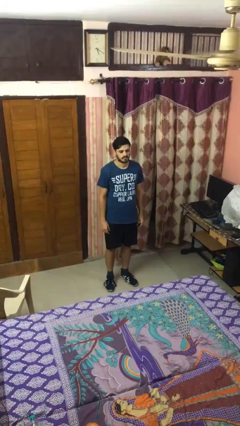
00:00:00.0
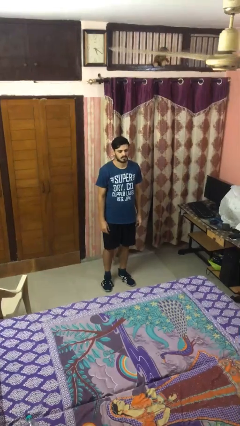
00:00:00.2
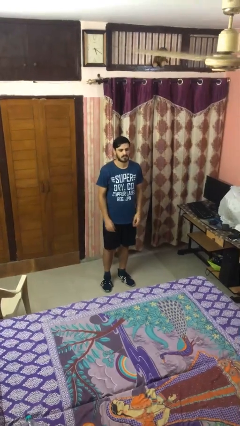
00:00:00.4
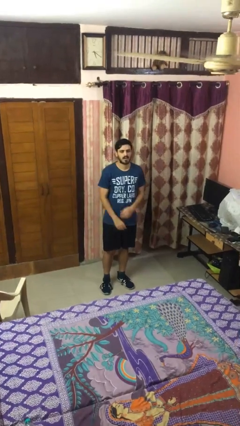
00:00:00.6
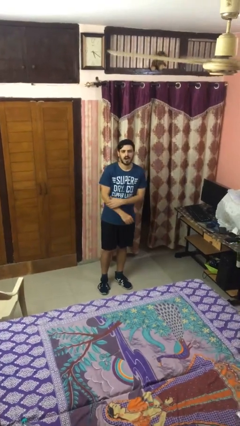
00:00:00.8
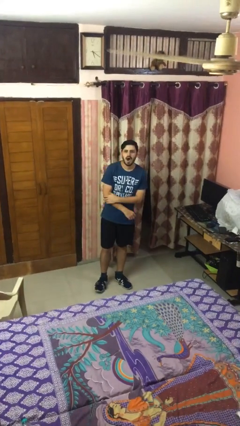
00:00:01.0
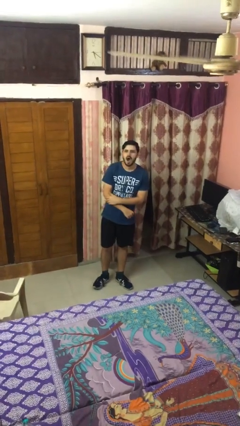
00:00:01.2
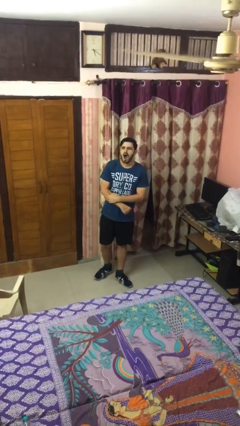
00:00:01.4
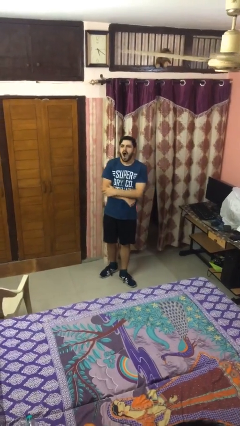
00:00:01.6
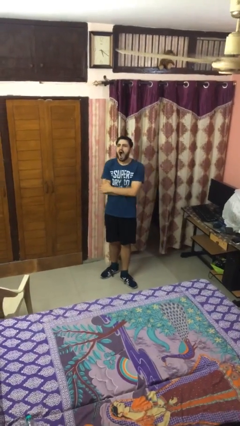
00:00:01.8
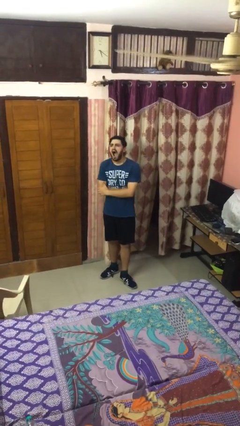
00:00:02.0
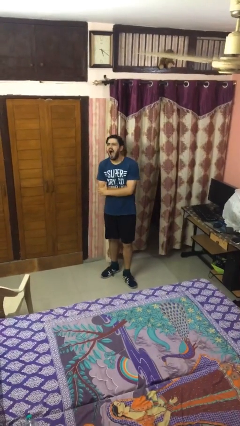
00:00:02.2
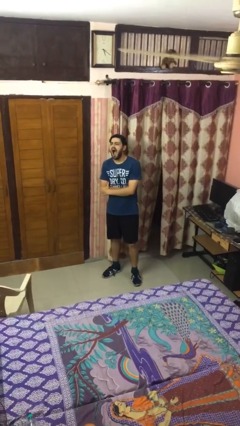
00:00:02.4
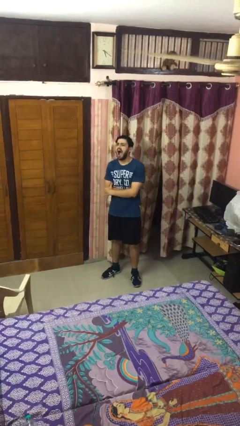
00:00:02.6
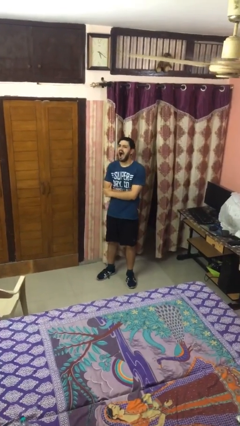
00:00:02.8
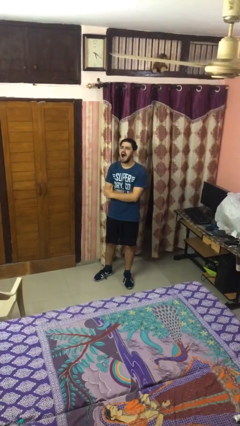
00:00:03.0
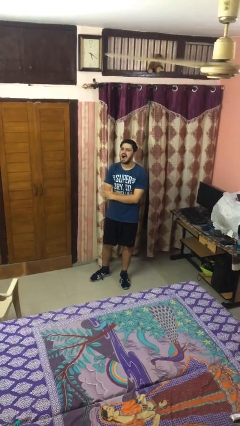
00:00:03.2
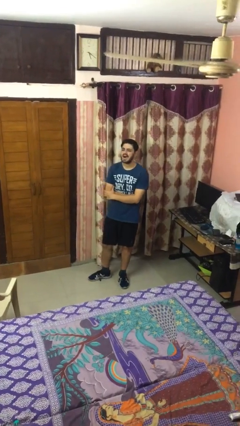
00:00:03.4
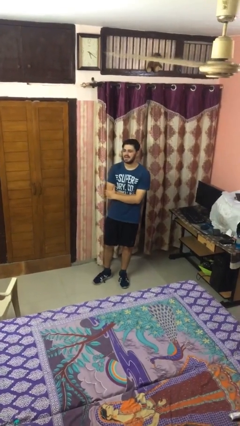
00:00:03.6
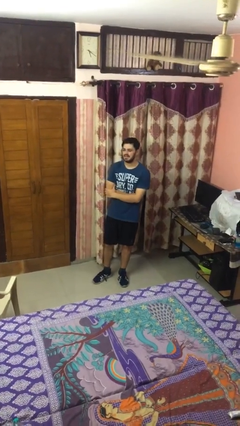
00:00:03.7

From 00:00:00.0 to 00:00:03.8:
person yawns

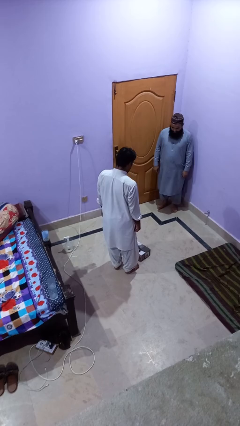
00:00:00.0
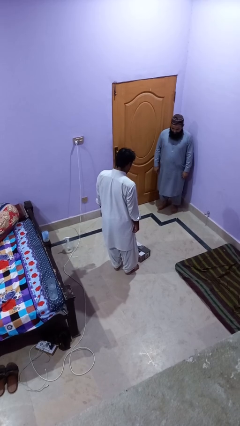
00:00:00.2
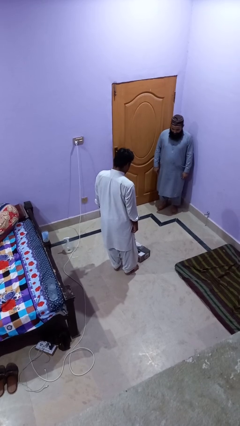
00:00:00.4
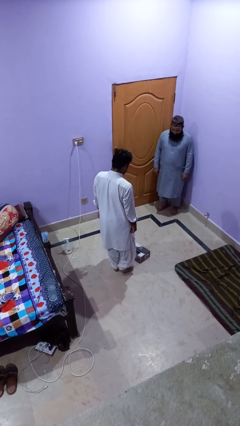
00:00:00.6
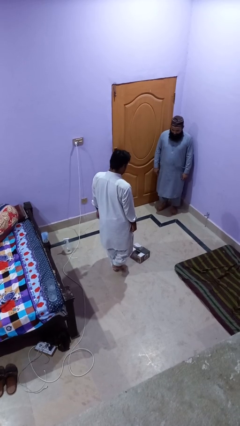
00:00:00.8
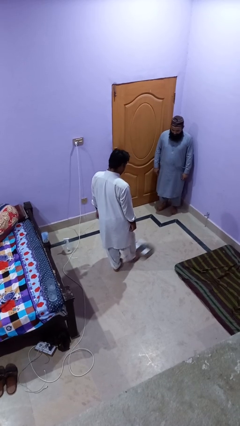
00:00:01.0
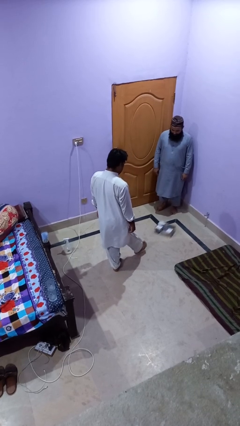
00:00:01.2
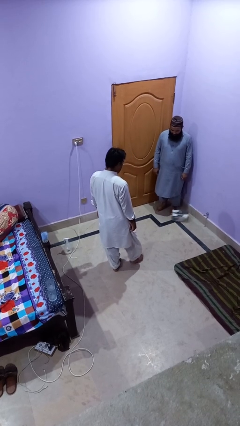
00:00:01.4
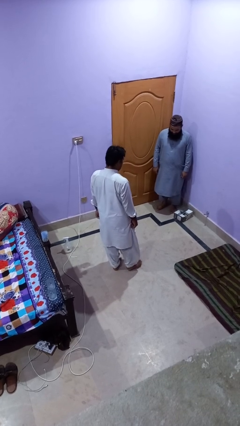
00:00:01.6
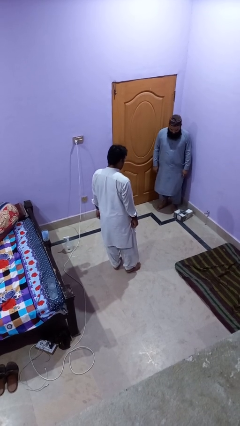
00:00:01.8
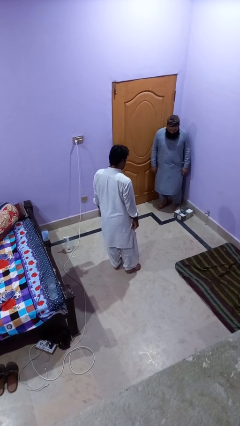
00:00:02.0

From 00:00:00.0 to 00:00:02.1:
person kicks object to person

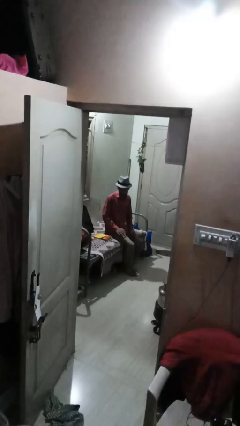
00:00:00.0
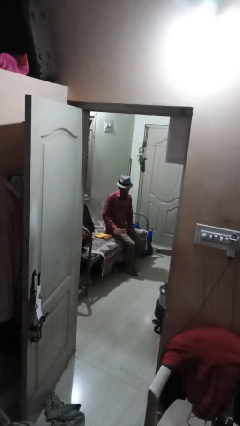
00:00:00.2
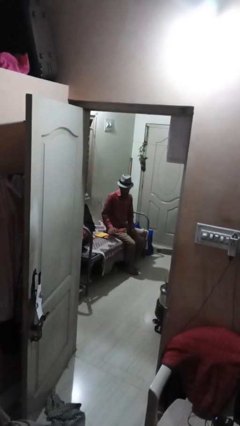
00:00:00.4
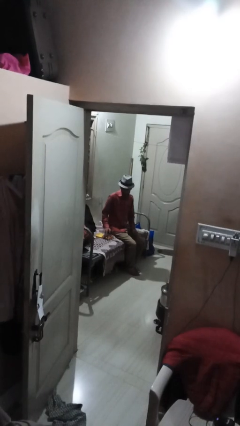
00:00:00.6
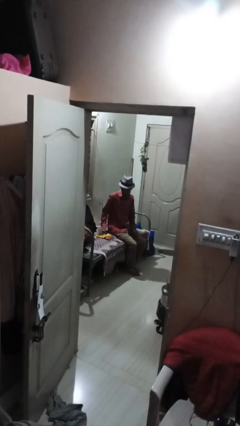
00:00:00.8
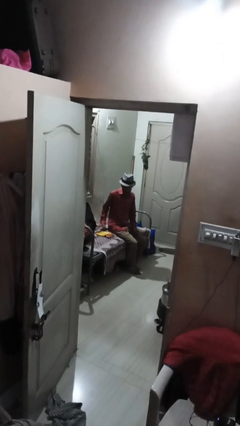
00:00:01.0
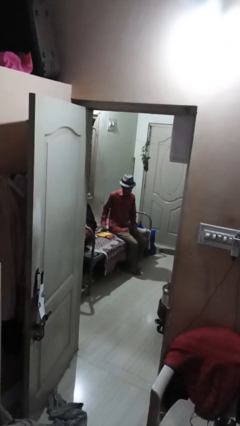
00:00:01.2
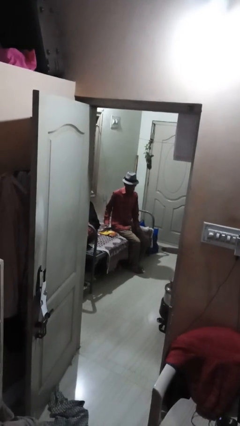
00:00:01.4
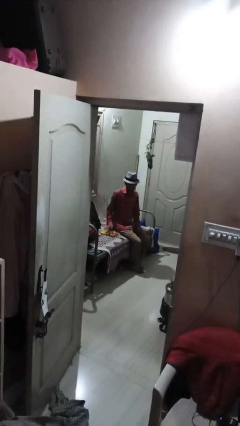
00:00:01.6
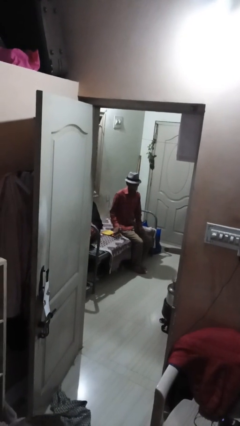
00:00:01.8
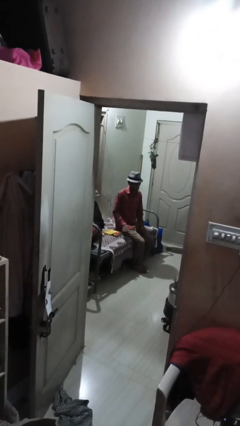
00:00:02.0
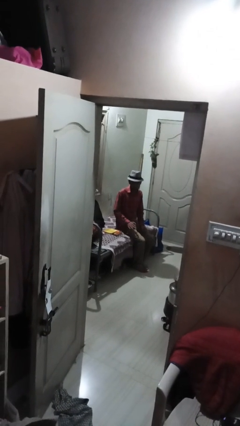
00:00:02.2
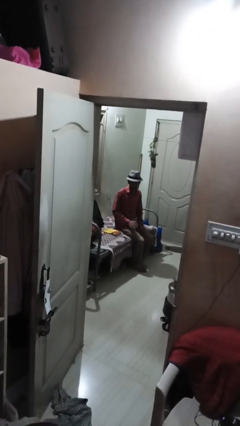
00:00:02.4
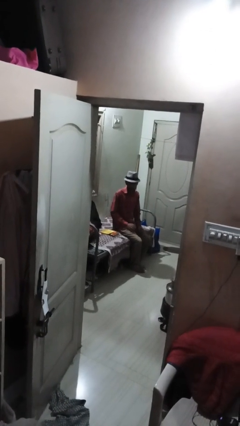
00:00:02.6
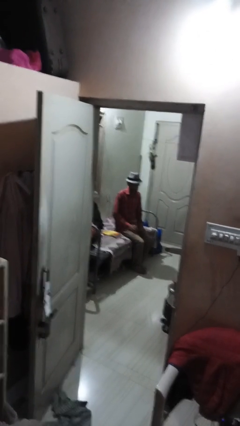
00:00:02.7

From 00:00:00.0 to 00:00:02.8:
person waves hand over object

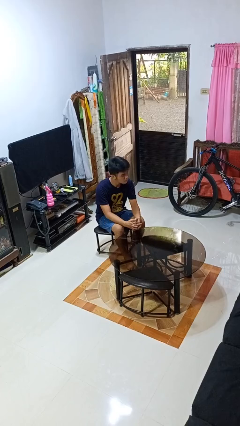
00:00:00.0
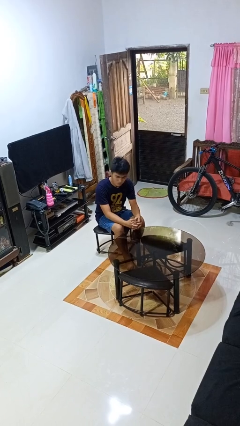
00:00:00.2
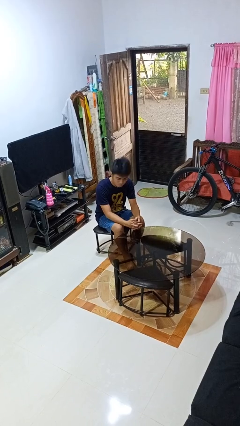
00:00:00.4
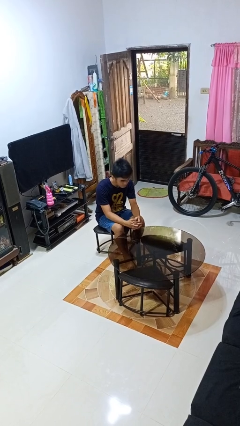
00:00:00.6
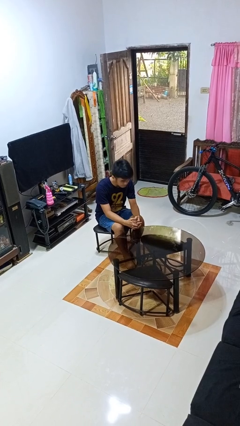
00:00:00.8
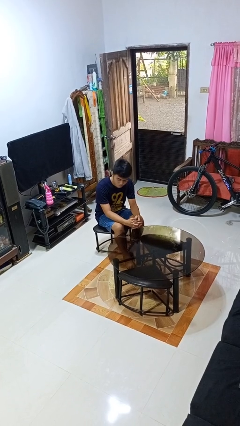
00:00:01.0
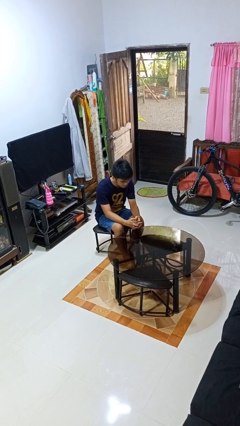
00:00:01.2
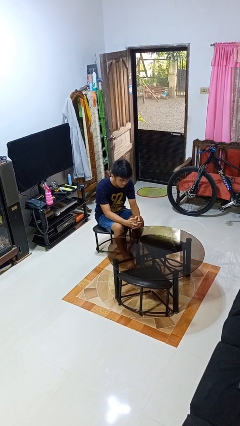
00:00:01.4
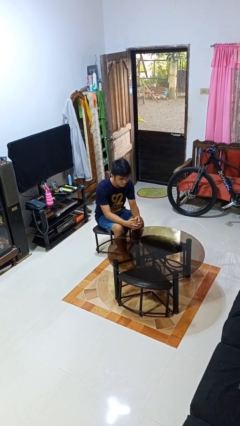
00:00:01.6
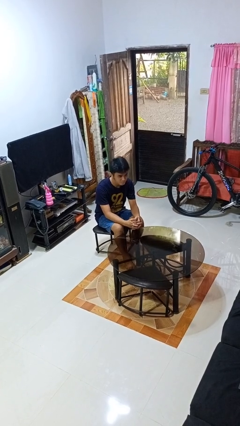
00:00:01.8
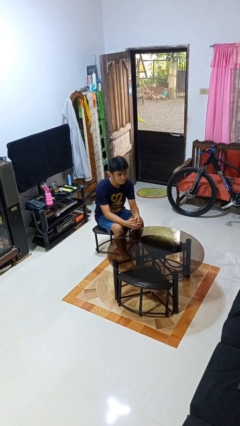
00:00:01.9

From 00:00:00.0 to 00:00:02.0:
person shakes head

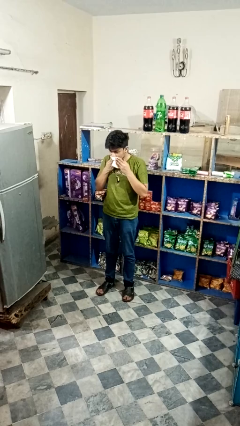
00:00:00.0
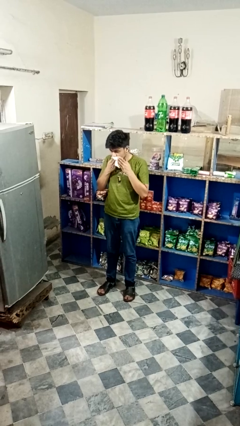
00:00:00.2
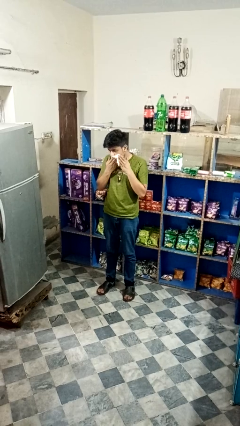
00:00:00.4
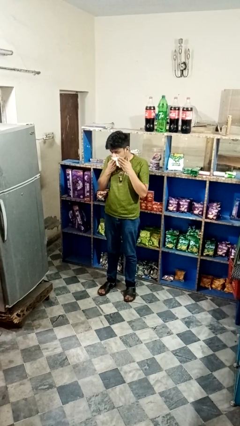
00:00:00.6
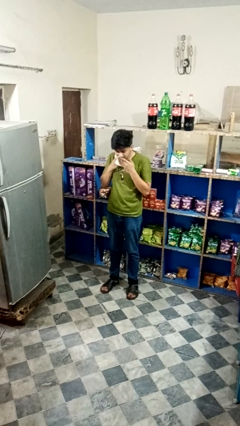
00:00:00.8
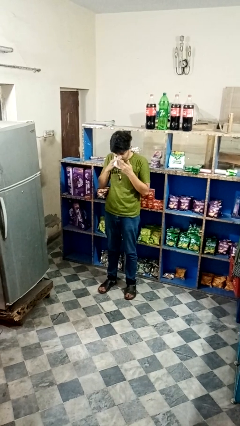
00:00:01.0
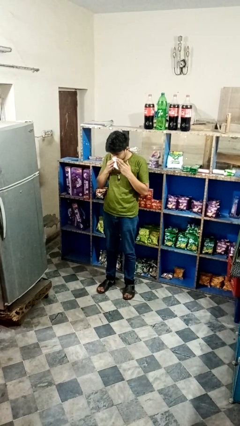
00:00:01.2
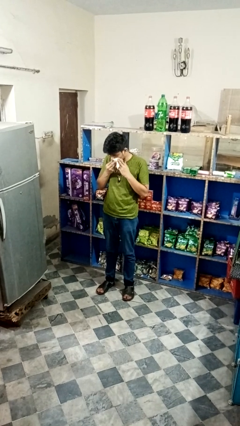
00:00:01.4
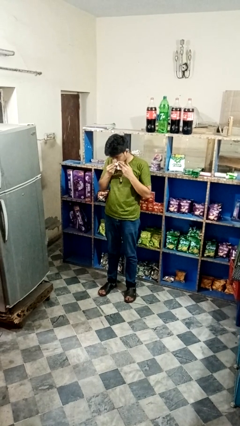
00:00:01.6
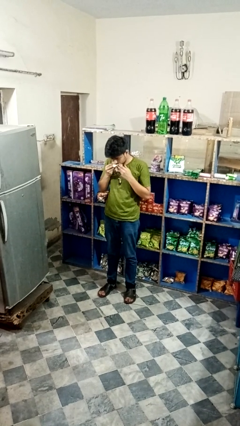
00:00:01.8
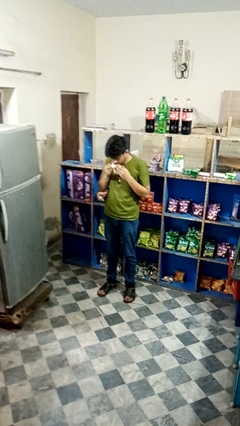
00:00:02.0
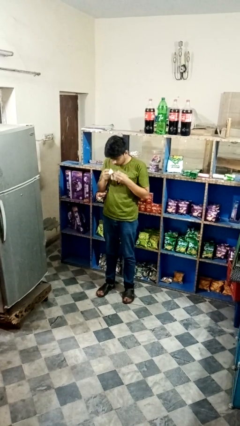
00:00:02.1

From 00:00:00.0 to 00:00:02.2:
person wipes mouth with napkin

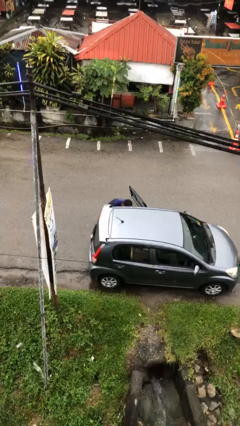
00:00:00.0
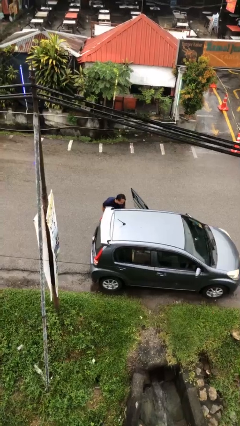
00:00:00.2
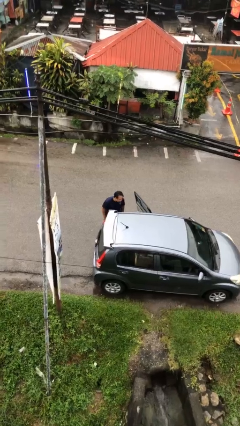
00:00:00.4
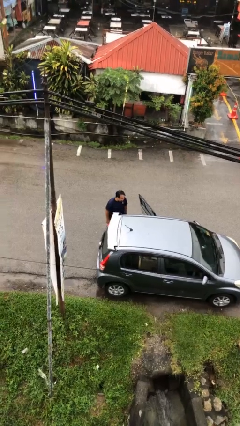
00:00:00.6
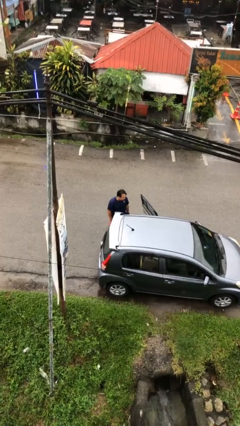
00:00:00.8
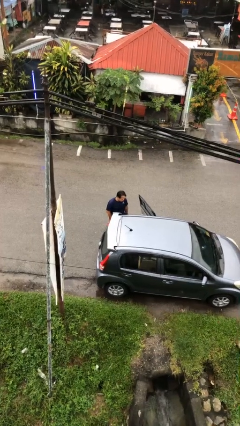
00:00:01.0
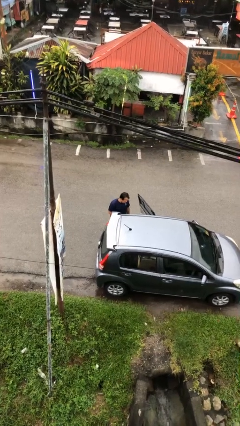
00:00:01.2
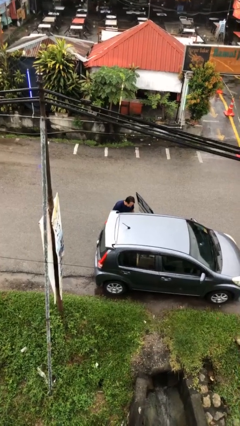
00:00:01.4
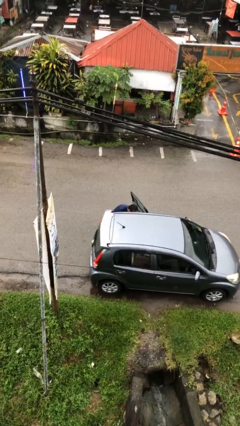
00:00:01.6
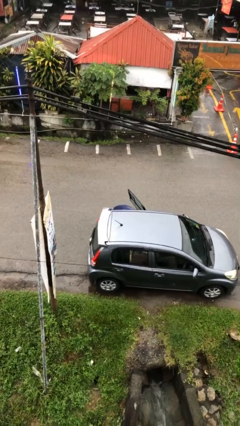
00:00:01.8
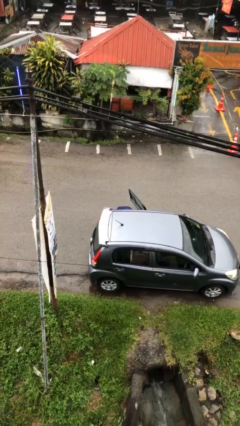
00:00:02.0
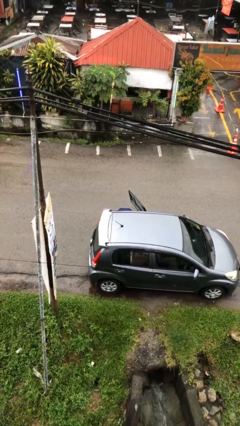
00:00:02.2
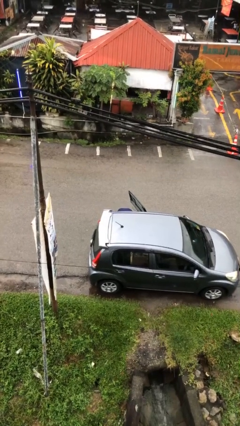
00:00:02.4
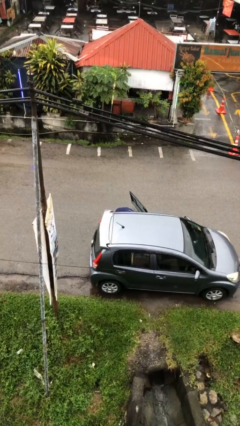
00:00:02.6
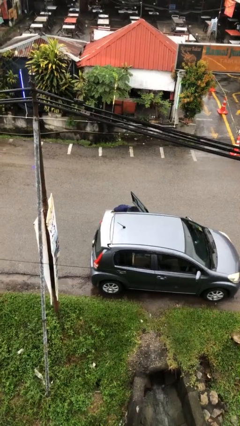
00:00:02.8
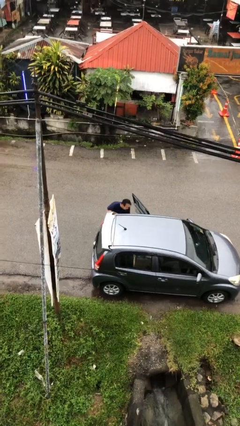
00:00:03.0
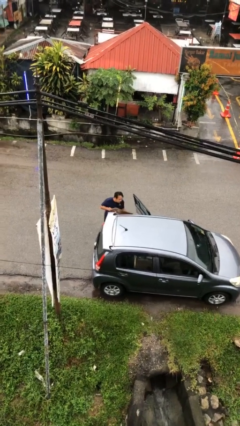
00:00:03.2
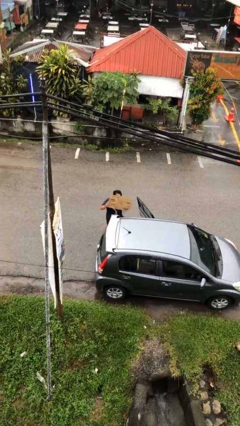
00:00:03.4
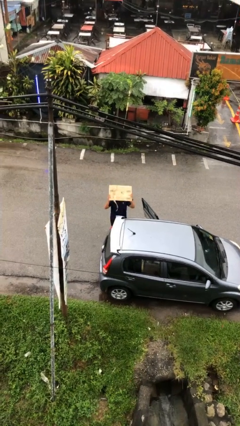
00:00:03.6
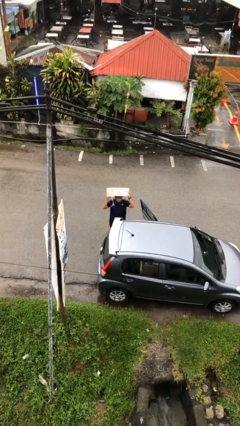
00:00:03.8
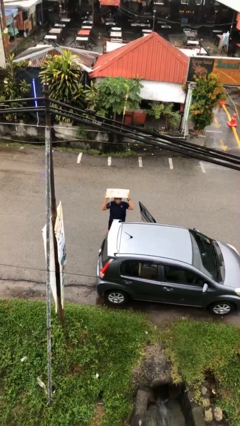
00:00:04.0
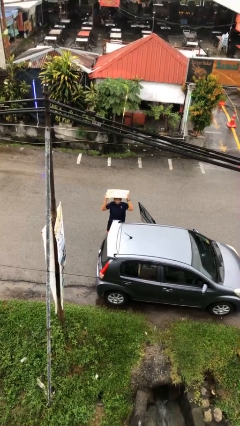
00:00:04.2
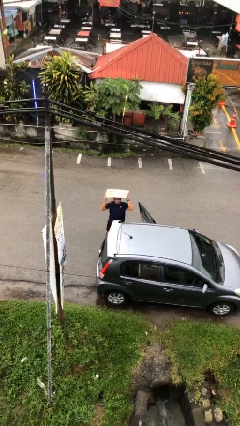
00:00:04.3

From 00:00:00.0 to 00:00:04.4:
person unloads car
